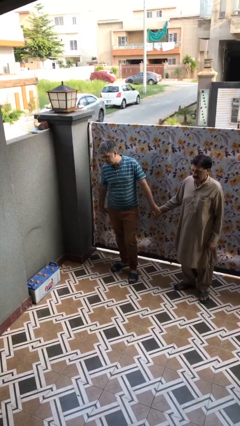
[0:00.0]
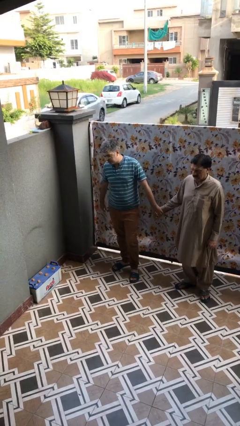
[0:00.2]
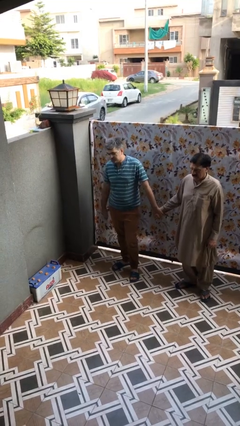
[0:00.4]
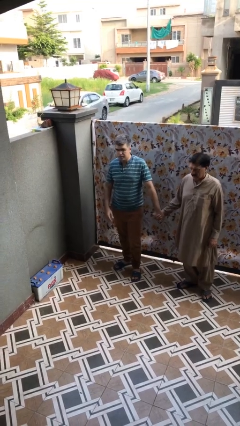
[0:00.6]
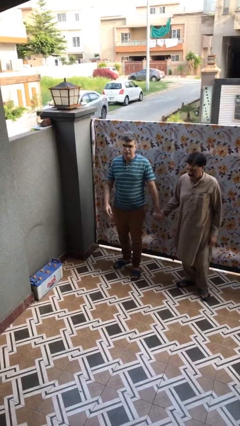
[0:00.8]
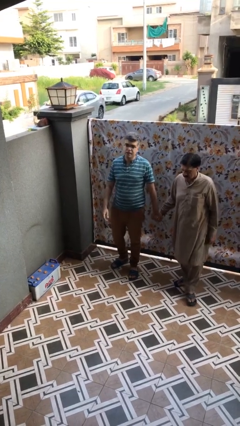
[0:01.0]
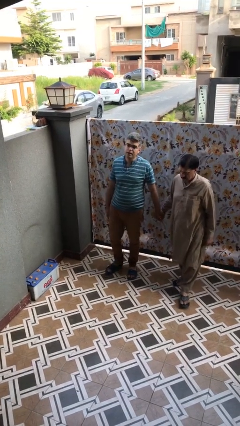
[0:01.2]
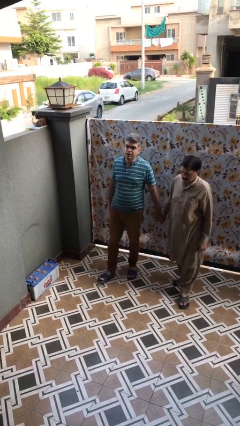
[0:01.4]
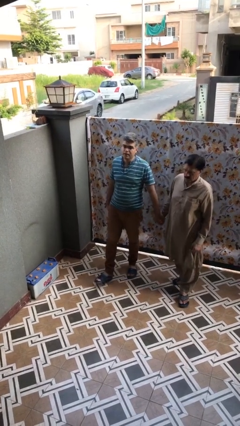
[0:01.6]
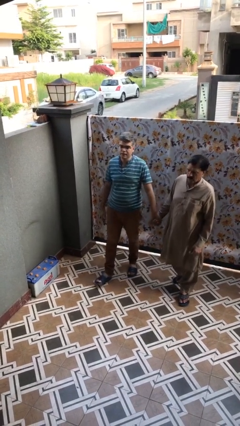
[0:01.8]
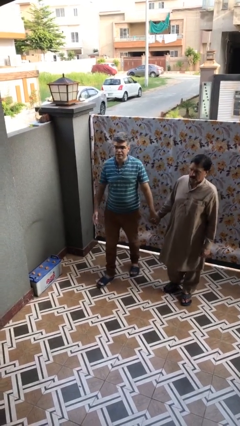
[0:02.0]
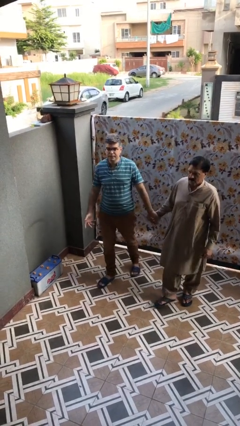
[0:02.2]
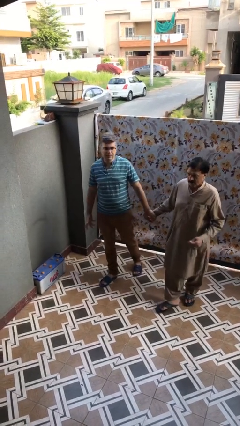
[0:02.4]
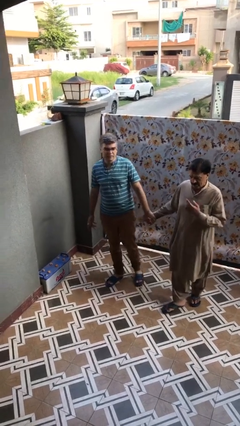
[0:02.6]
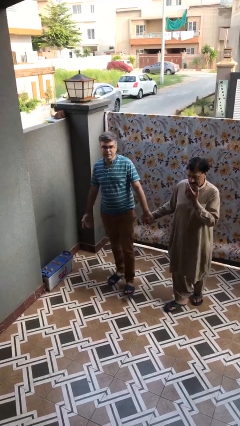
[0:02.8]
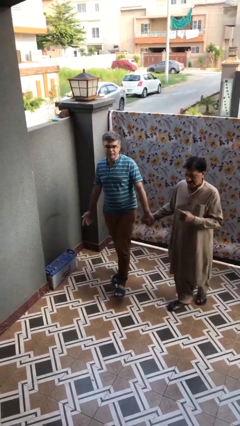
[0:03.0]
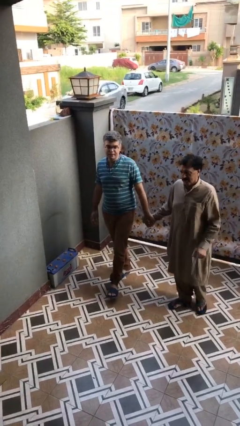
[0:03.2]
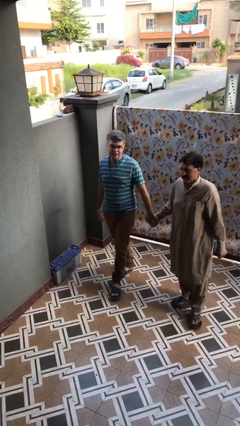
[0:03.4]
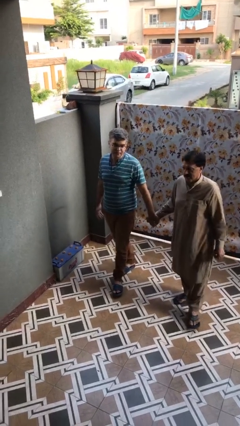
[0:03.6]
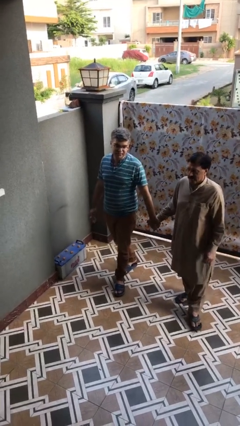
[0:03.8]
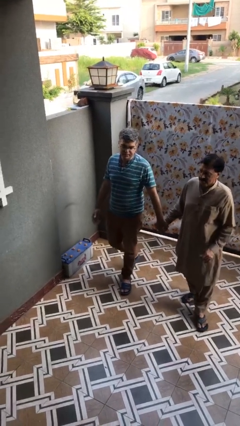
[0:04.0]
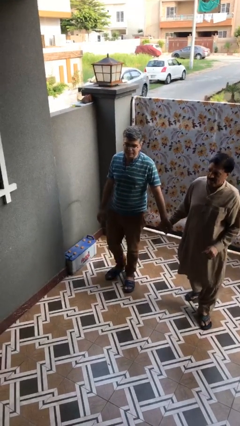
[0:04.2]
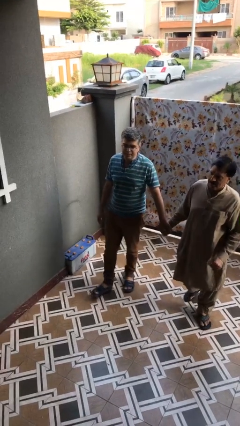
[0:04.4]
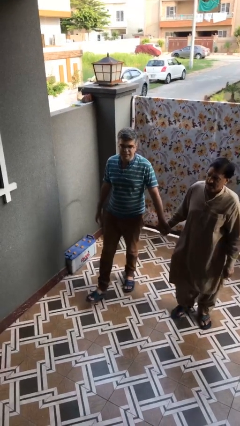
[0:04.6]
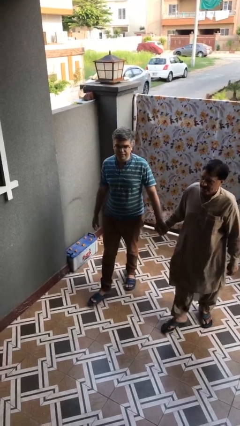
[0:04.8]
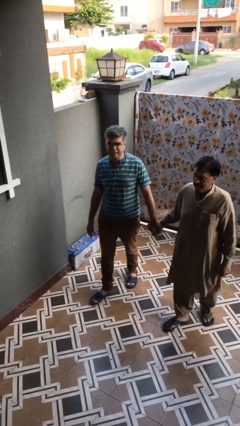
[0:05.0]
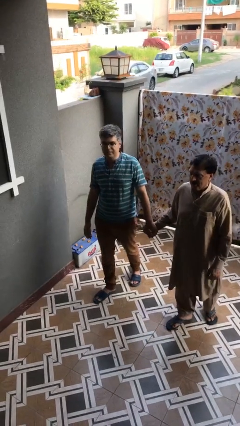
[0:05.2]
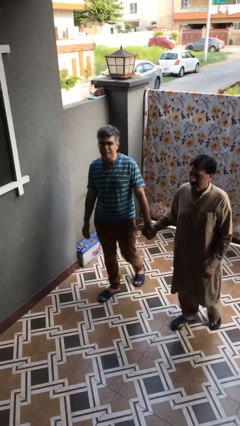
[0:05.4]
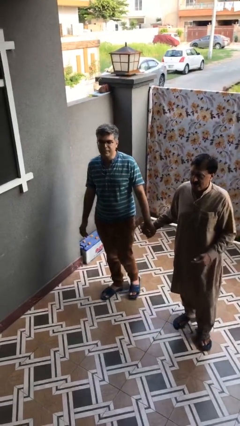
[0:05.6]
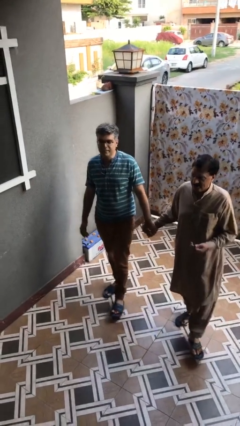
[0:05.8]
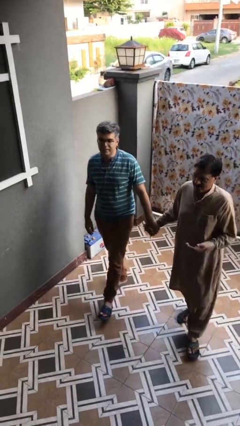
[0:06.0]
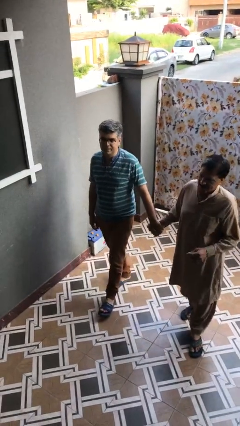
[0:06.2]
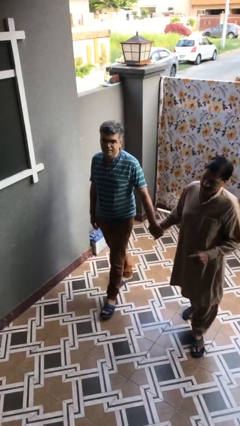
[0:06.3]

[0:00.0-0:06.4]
person holds hand

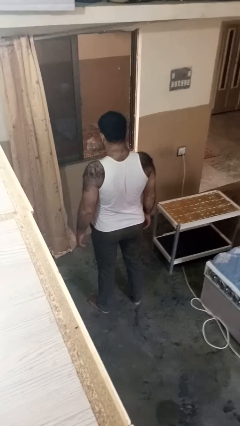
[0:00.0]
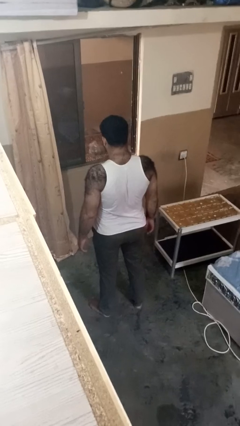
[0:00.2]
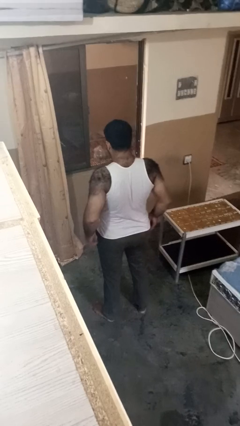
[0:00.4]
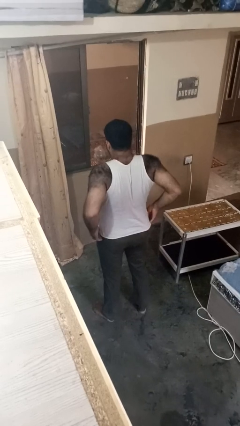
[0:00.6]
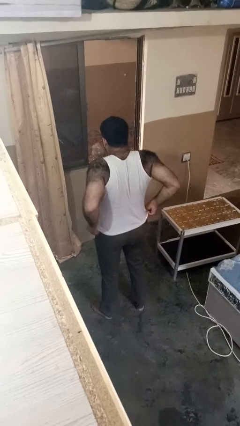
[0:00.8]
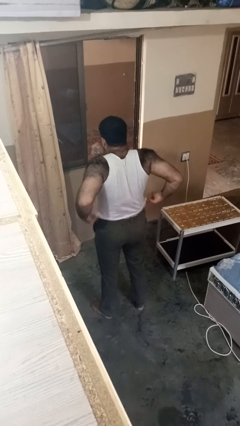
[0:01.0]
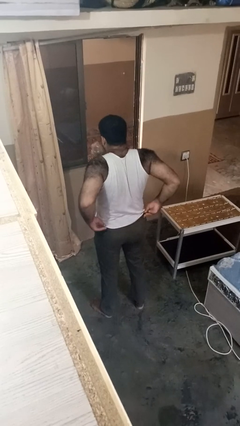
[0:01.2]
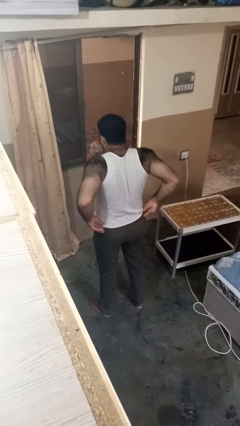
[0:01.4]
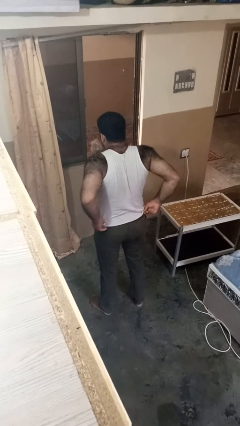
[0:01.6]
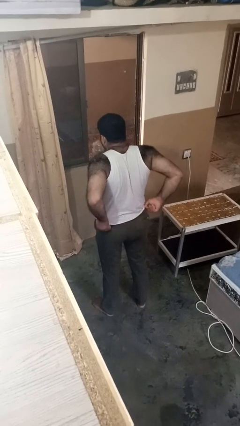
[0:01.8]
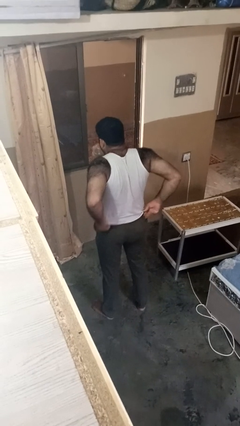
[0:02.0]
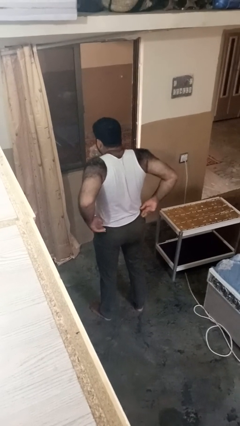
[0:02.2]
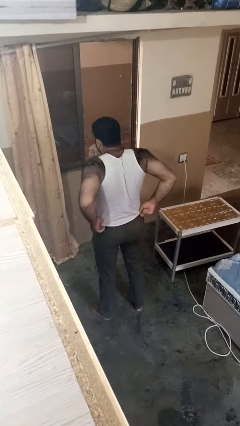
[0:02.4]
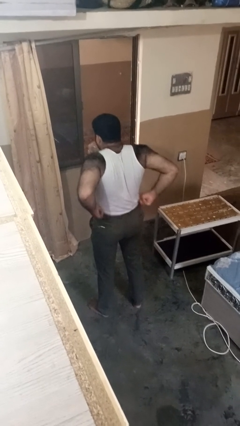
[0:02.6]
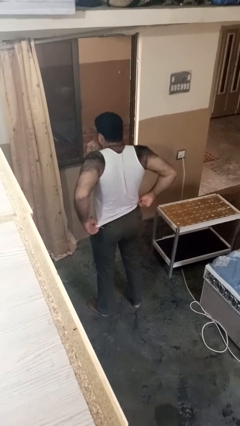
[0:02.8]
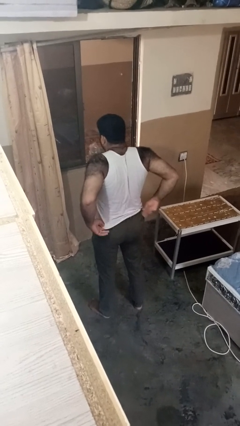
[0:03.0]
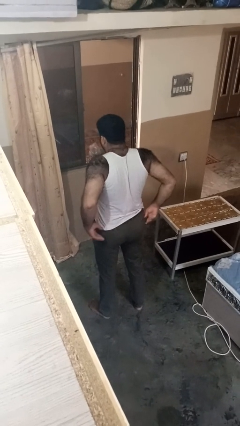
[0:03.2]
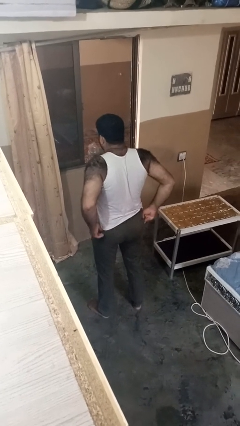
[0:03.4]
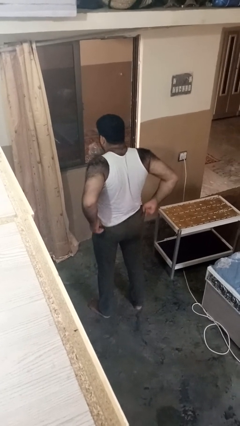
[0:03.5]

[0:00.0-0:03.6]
person hikes up pants

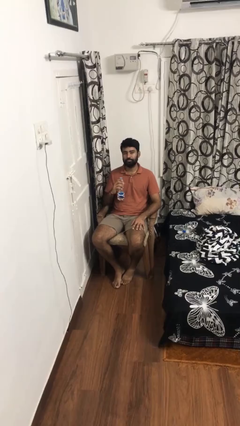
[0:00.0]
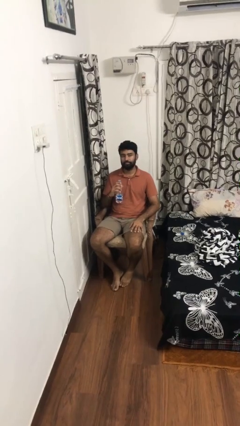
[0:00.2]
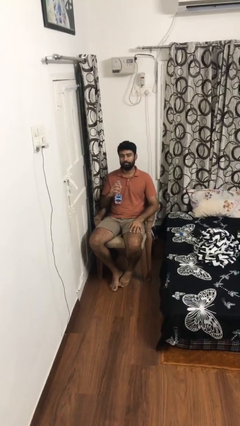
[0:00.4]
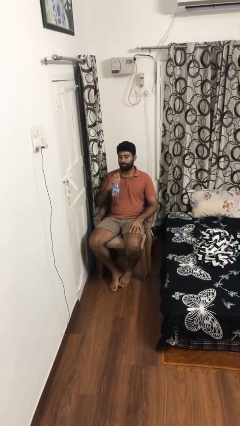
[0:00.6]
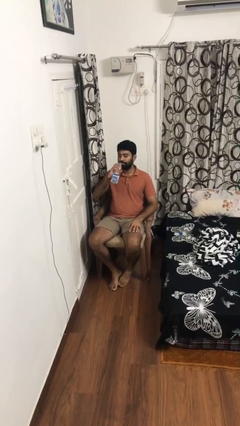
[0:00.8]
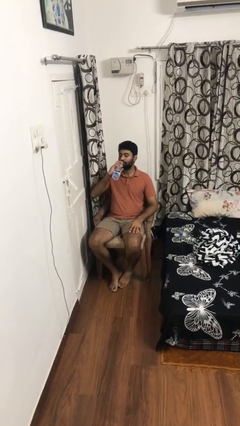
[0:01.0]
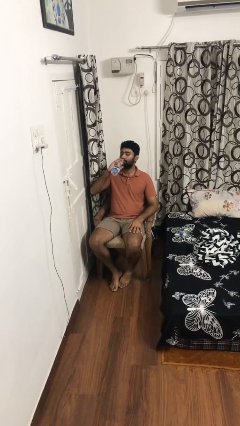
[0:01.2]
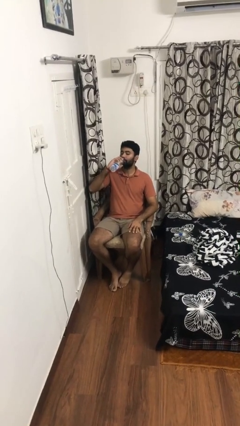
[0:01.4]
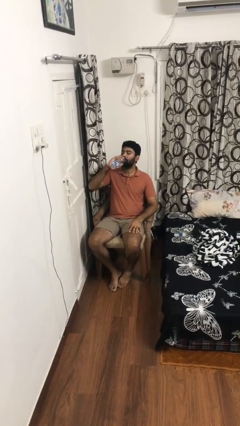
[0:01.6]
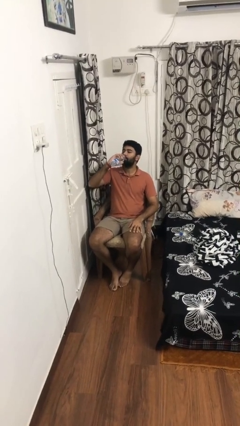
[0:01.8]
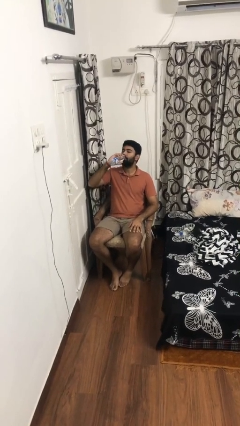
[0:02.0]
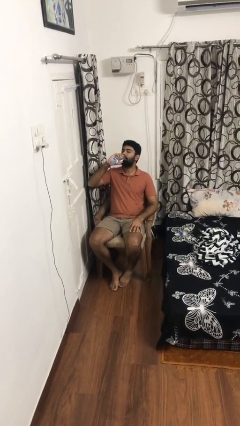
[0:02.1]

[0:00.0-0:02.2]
person drinks from bottle

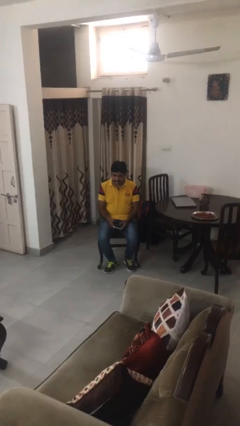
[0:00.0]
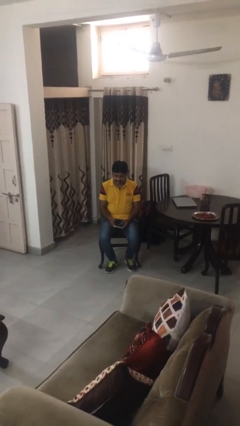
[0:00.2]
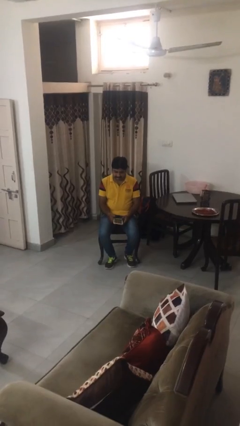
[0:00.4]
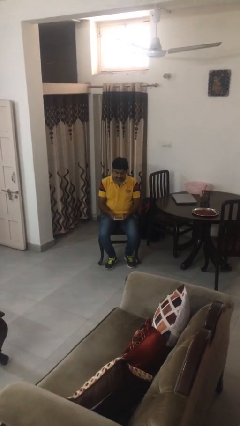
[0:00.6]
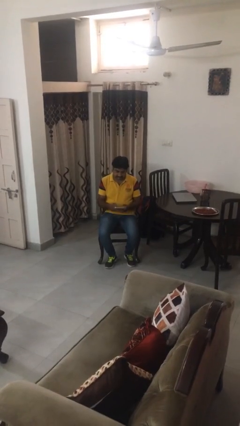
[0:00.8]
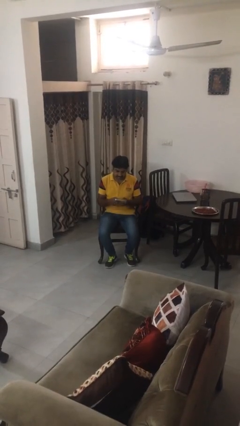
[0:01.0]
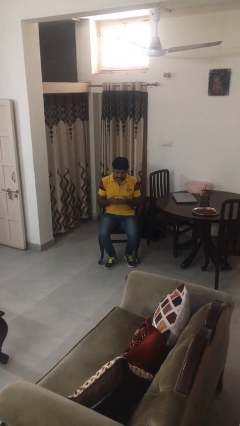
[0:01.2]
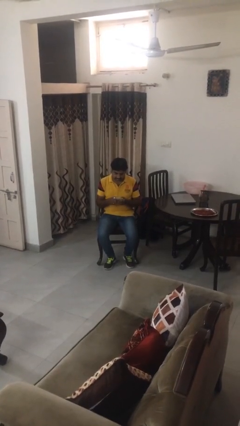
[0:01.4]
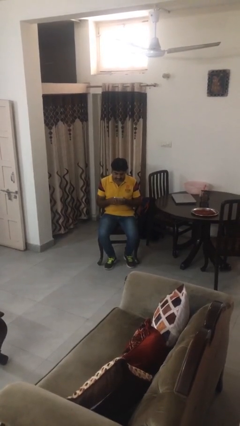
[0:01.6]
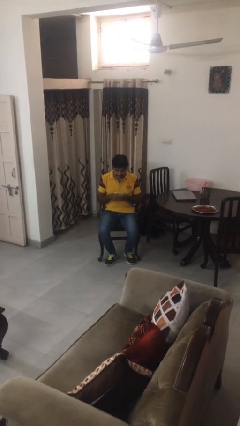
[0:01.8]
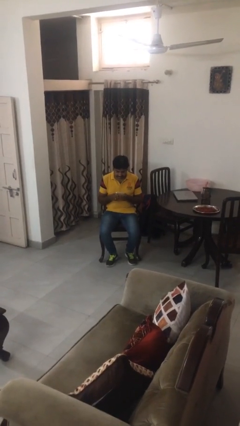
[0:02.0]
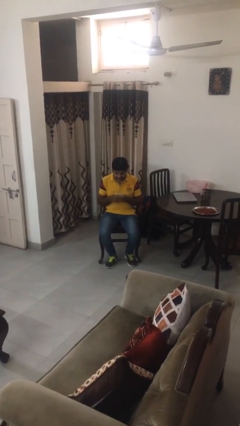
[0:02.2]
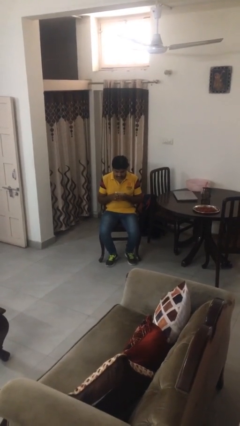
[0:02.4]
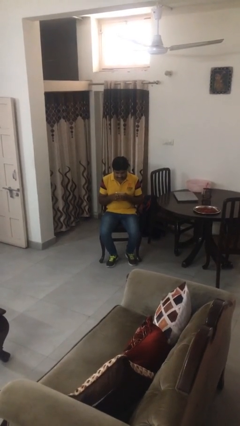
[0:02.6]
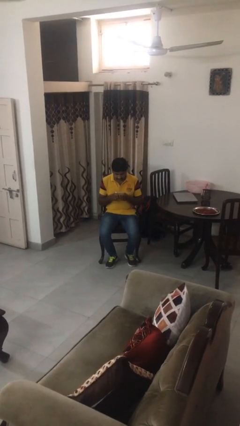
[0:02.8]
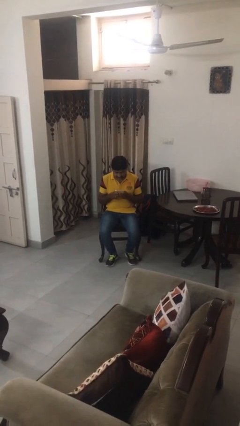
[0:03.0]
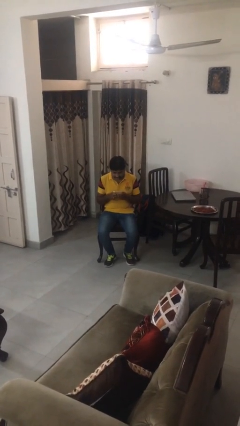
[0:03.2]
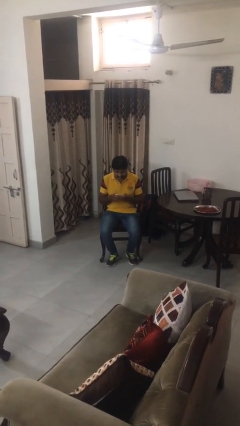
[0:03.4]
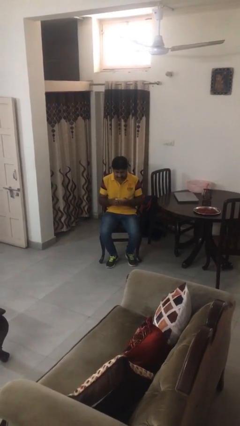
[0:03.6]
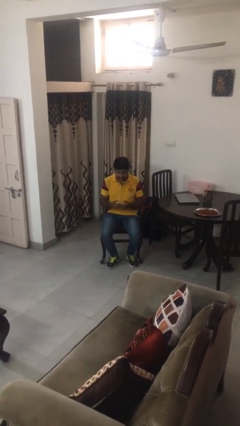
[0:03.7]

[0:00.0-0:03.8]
person interacts with tablet

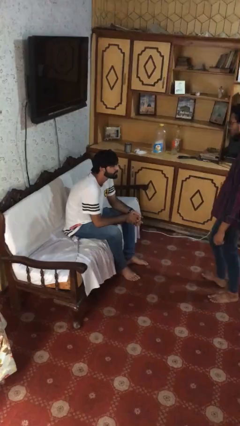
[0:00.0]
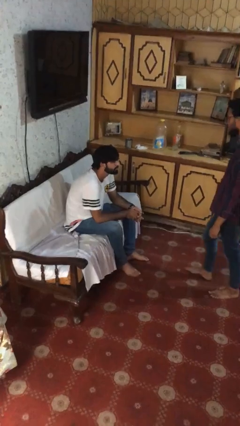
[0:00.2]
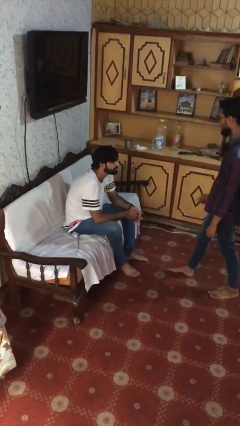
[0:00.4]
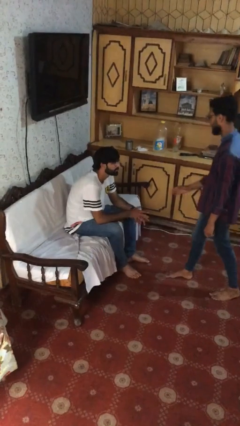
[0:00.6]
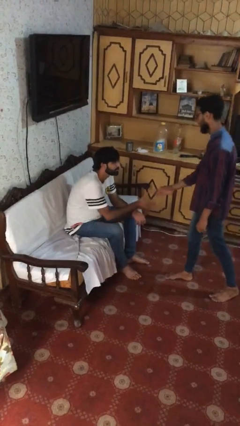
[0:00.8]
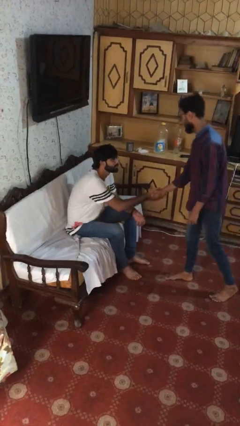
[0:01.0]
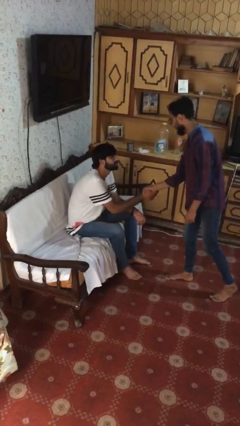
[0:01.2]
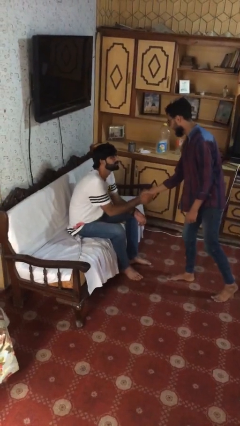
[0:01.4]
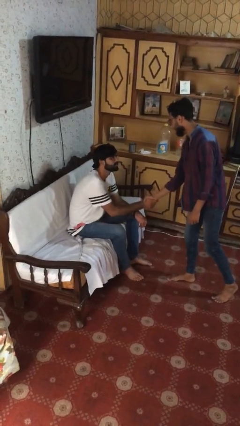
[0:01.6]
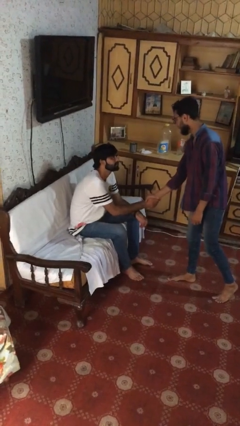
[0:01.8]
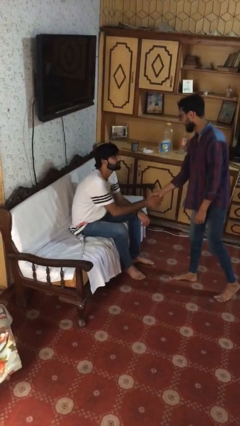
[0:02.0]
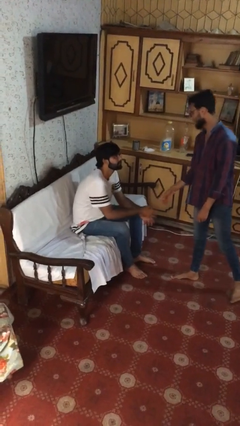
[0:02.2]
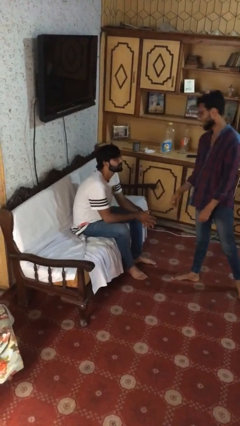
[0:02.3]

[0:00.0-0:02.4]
person shakes hand
